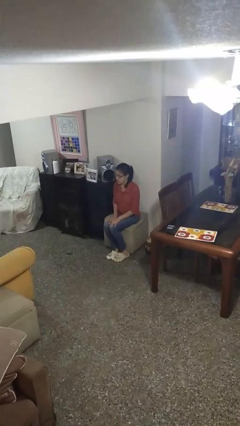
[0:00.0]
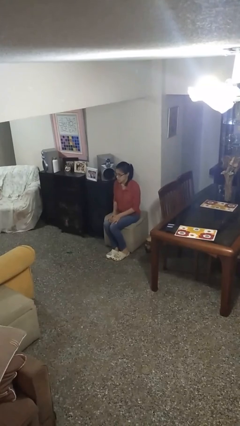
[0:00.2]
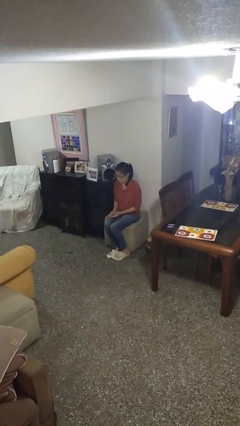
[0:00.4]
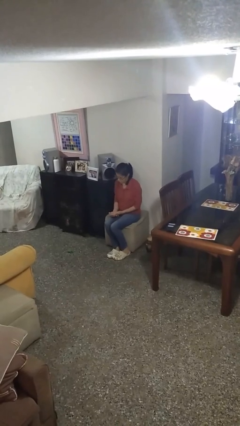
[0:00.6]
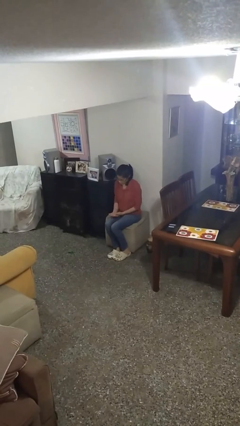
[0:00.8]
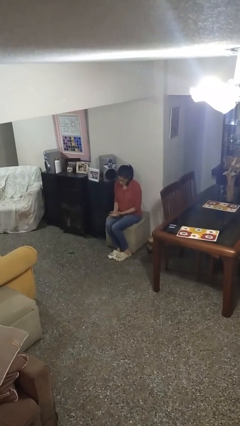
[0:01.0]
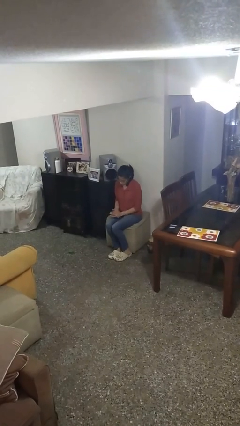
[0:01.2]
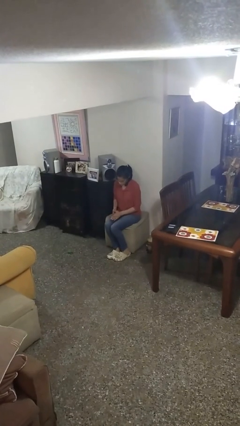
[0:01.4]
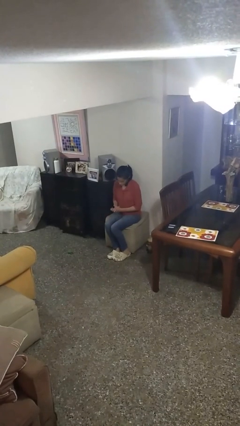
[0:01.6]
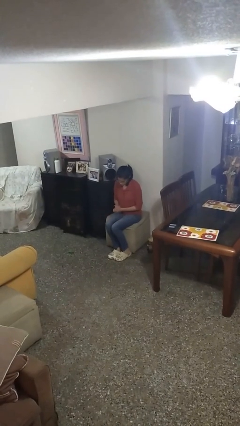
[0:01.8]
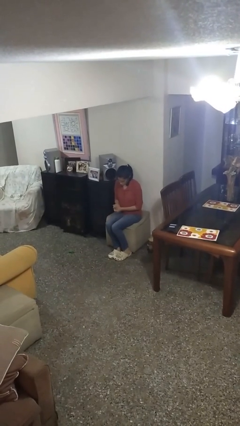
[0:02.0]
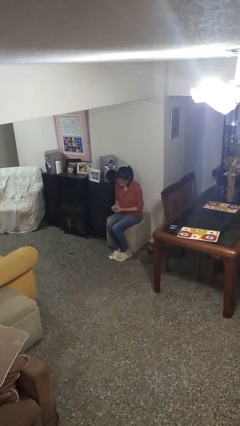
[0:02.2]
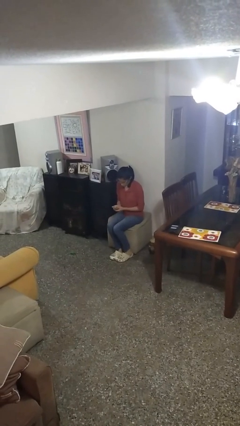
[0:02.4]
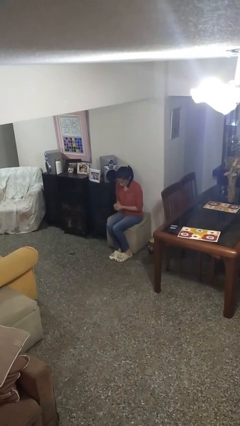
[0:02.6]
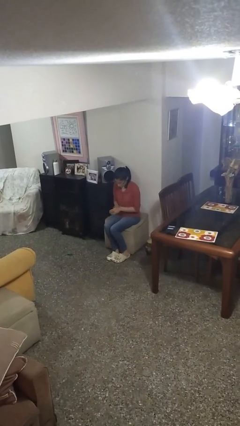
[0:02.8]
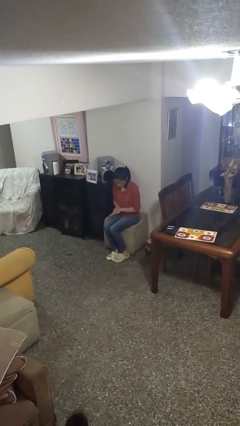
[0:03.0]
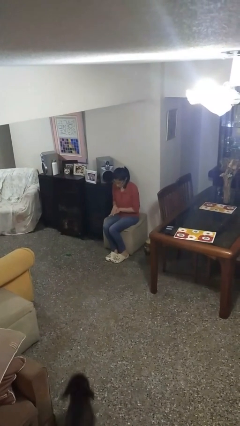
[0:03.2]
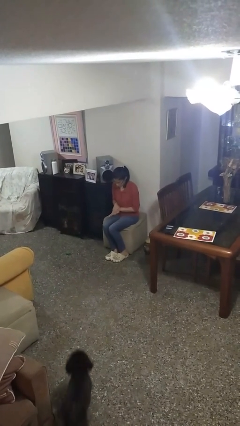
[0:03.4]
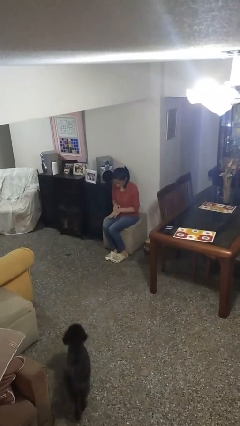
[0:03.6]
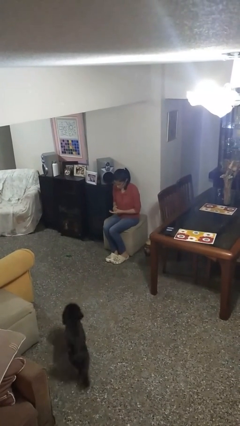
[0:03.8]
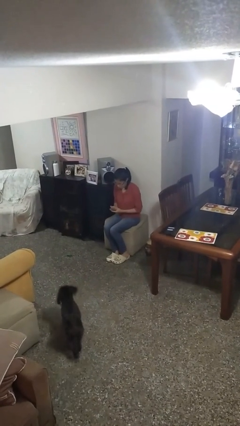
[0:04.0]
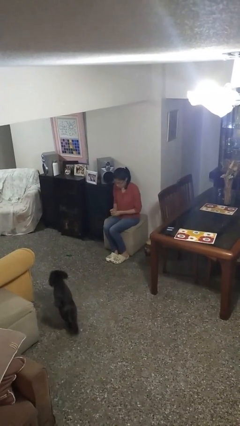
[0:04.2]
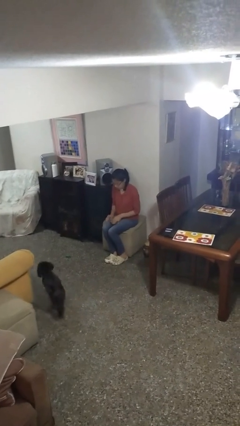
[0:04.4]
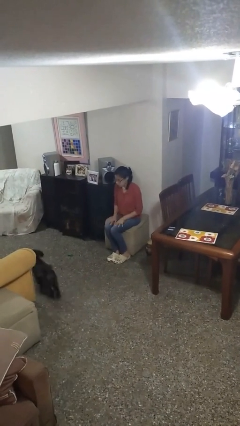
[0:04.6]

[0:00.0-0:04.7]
person looks at hands in lap

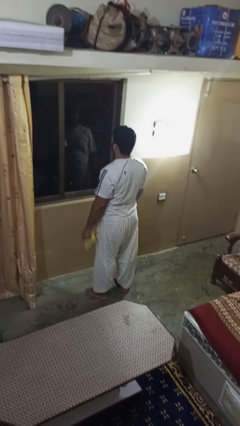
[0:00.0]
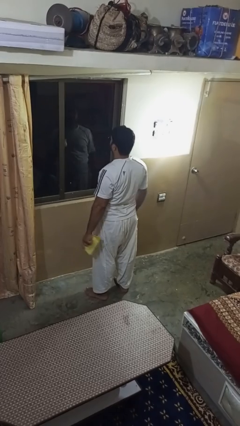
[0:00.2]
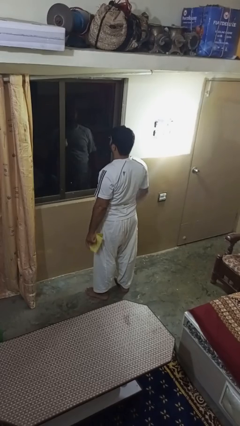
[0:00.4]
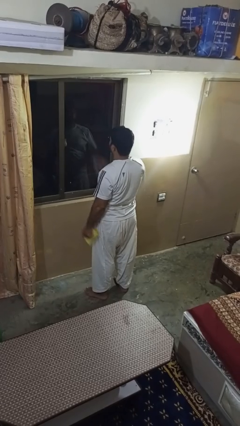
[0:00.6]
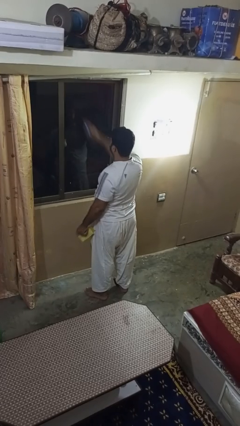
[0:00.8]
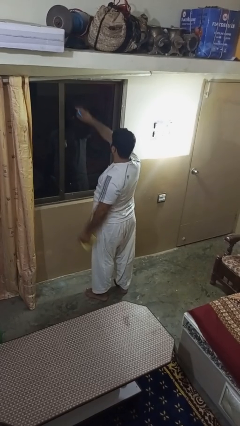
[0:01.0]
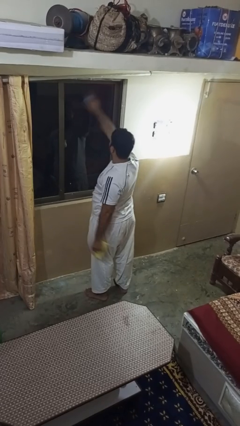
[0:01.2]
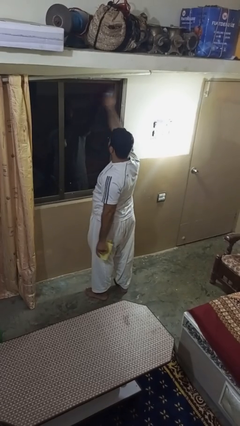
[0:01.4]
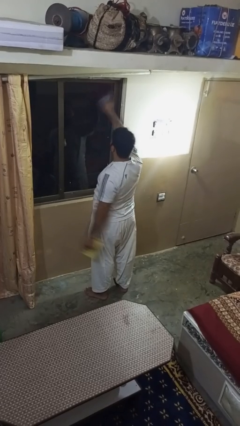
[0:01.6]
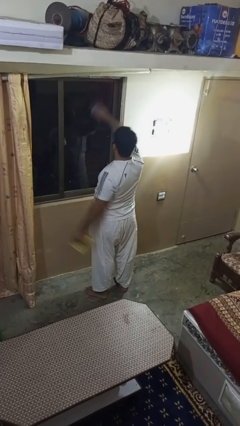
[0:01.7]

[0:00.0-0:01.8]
person sprays from bottle

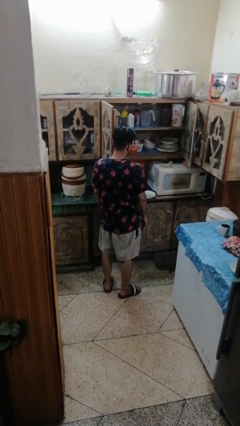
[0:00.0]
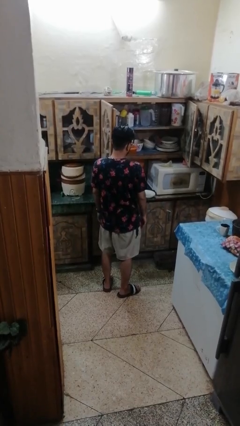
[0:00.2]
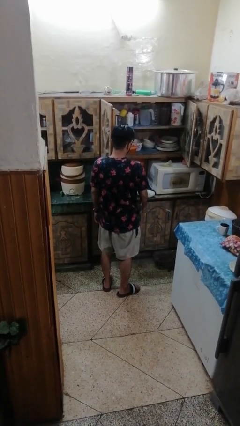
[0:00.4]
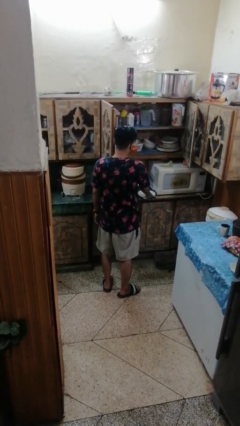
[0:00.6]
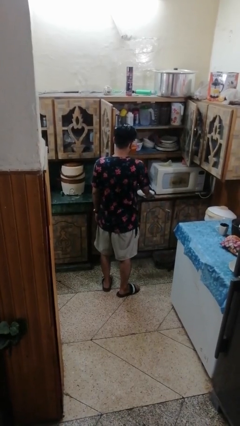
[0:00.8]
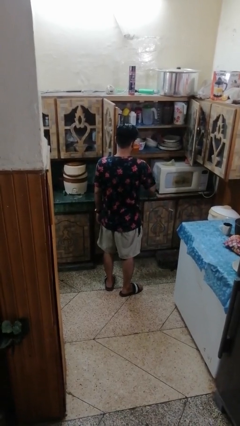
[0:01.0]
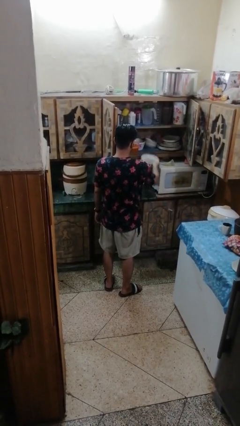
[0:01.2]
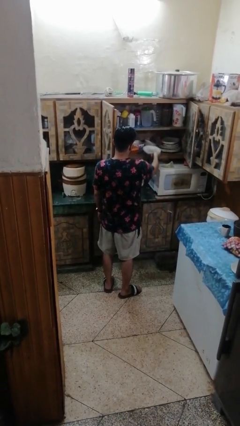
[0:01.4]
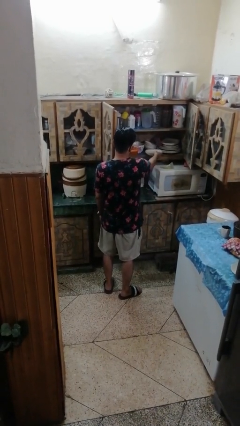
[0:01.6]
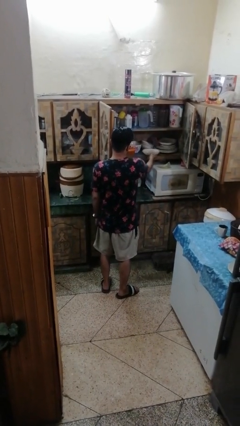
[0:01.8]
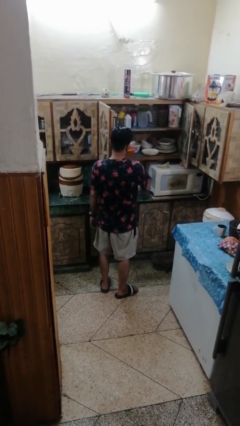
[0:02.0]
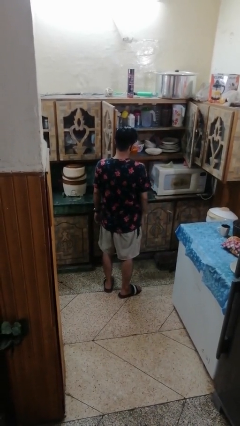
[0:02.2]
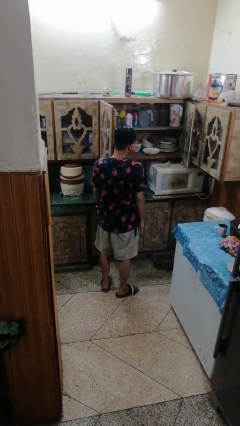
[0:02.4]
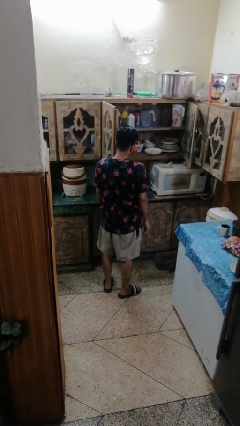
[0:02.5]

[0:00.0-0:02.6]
person puts object in cabinet

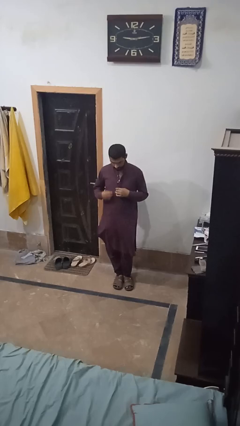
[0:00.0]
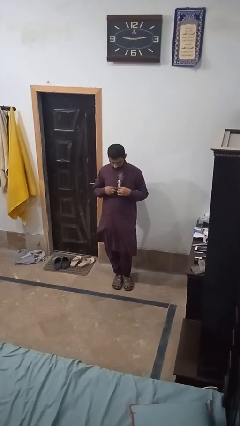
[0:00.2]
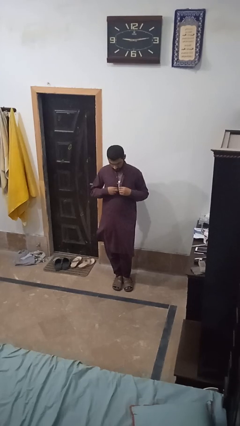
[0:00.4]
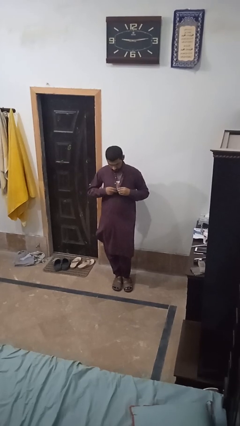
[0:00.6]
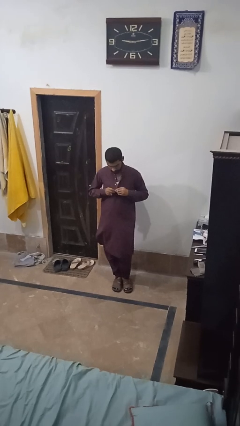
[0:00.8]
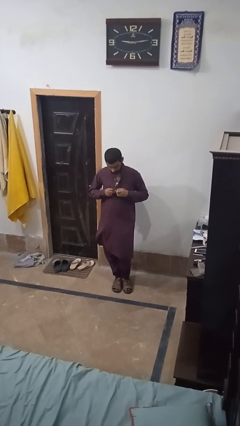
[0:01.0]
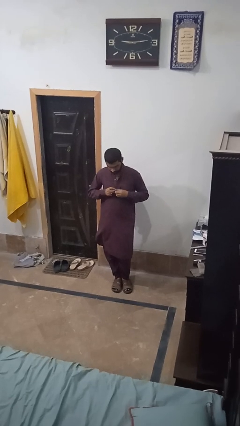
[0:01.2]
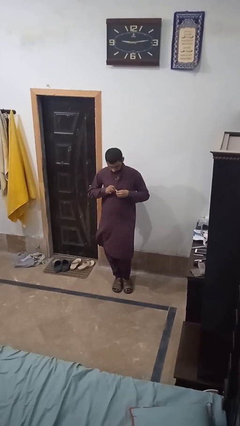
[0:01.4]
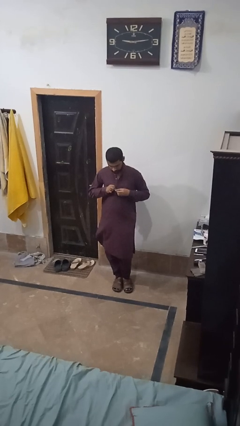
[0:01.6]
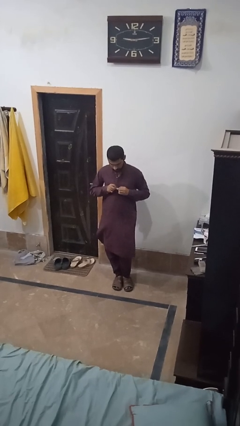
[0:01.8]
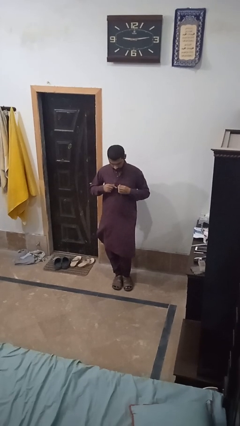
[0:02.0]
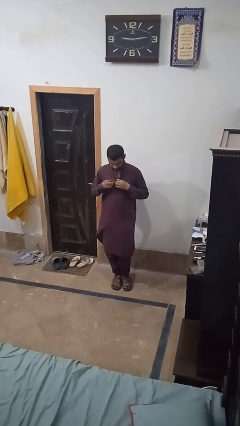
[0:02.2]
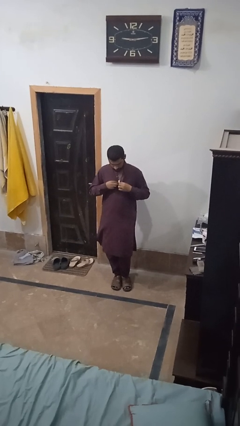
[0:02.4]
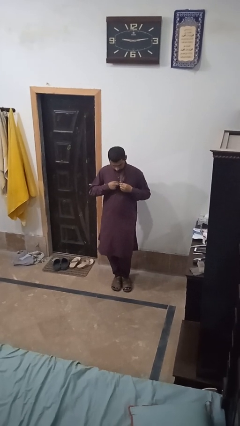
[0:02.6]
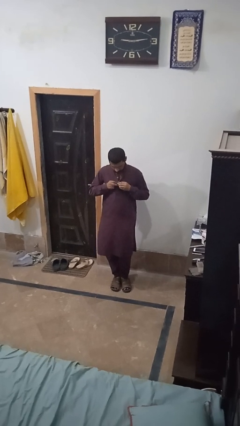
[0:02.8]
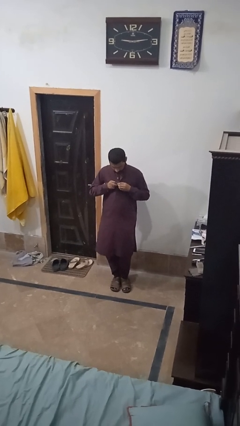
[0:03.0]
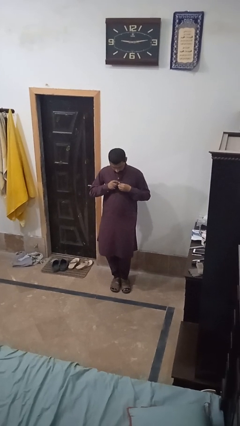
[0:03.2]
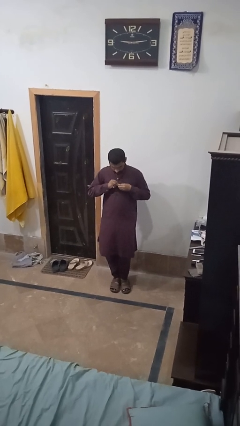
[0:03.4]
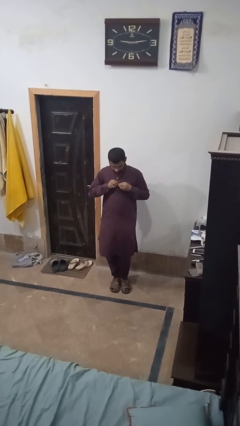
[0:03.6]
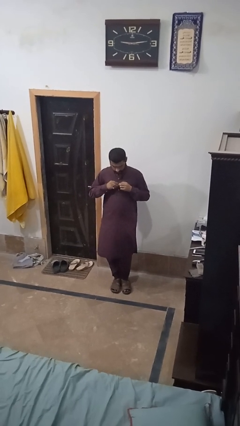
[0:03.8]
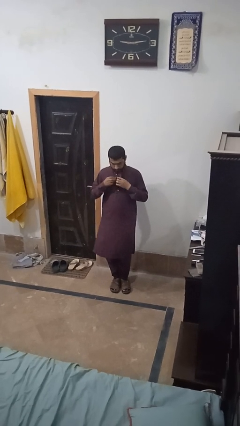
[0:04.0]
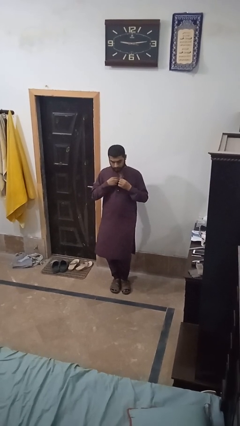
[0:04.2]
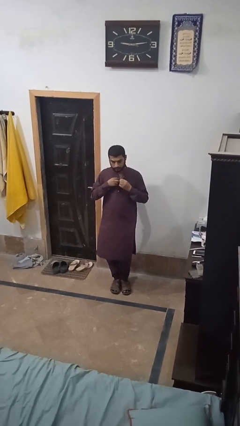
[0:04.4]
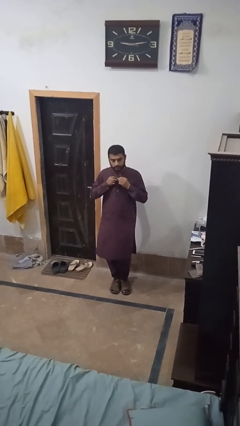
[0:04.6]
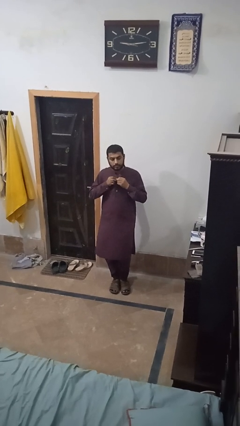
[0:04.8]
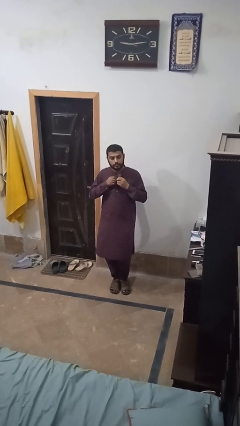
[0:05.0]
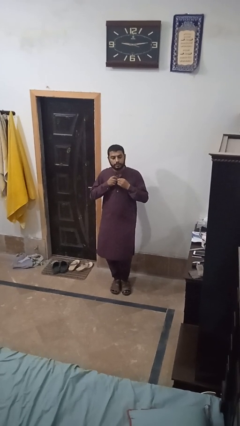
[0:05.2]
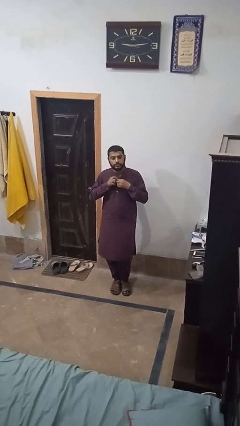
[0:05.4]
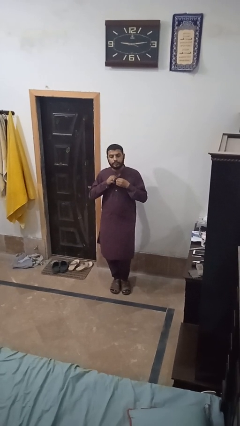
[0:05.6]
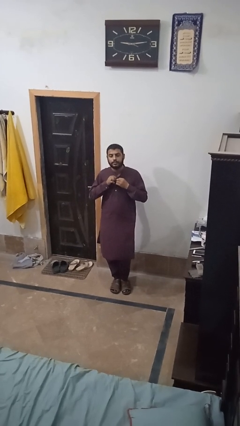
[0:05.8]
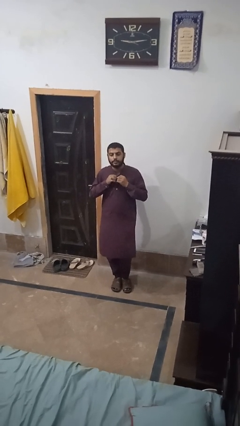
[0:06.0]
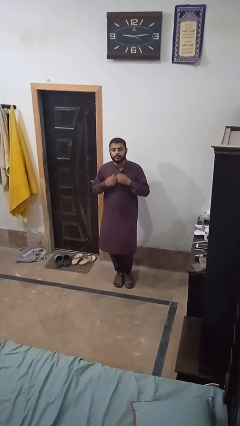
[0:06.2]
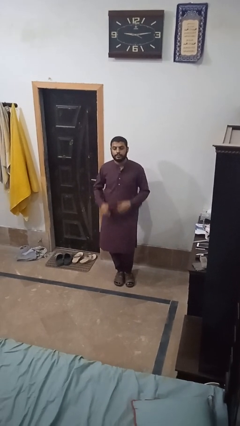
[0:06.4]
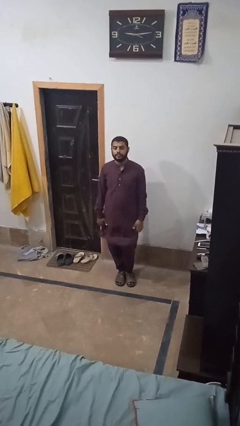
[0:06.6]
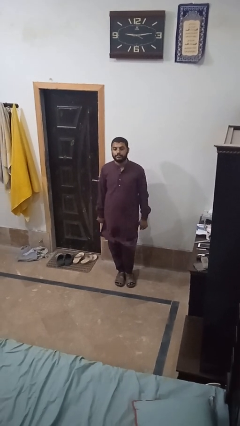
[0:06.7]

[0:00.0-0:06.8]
person buttons shirt

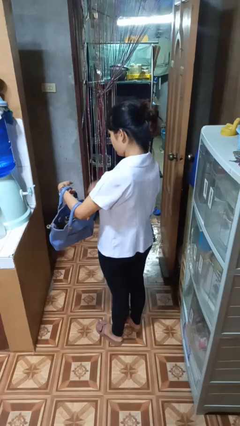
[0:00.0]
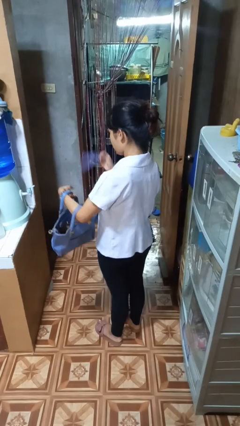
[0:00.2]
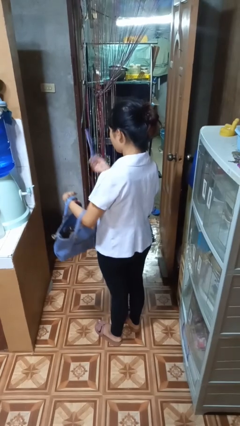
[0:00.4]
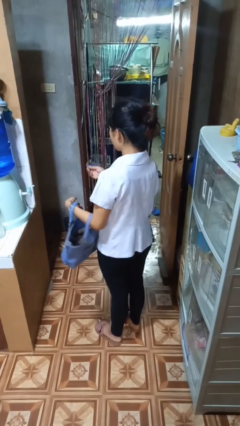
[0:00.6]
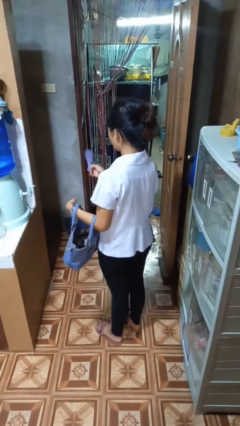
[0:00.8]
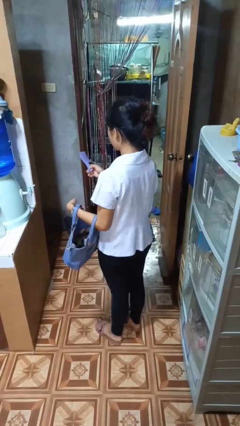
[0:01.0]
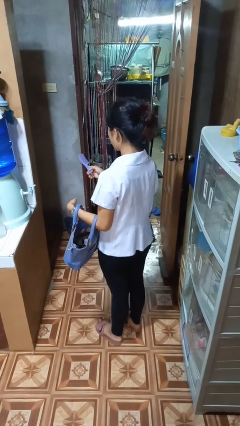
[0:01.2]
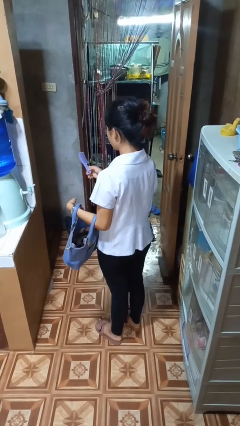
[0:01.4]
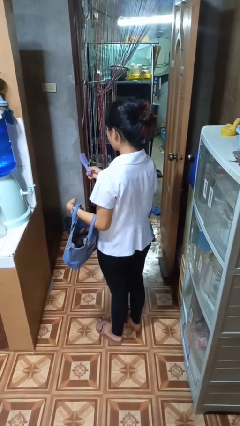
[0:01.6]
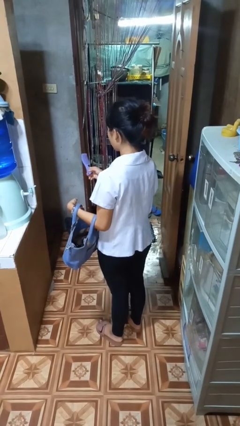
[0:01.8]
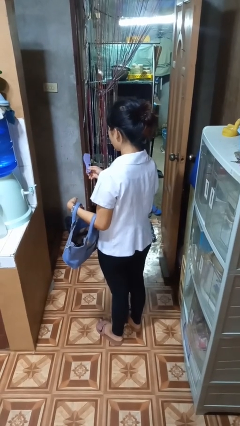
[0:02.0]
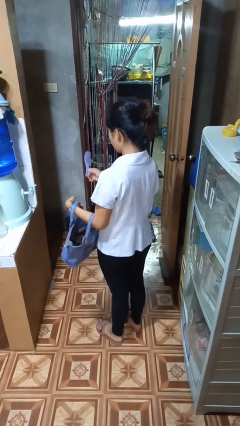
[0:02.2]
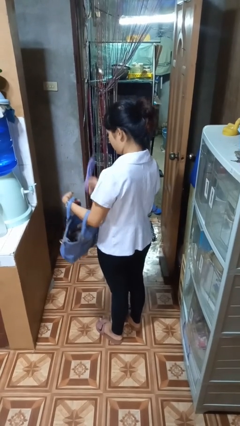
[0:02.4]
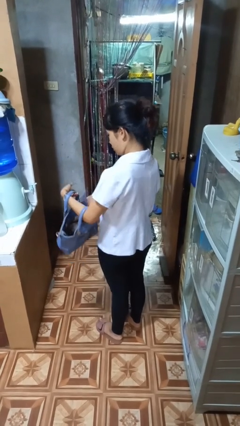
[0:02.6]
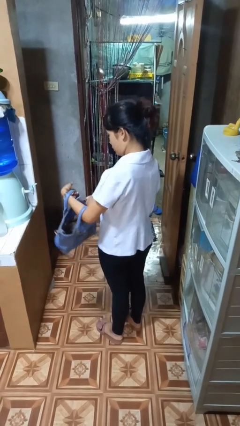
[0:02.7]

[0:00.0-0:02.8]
person takes object from purse
